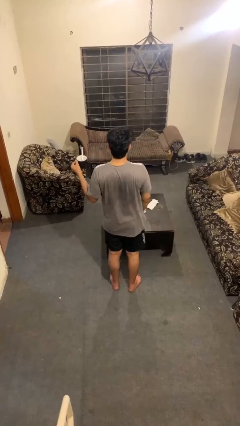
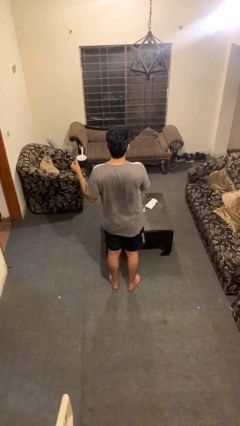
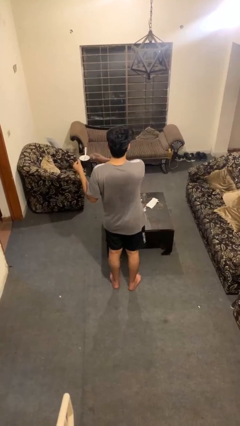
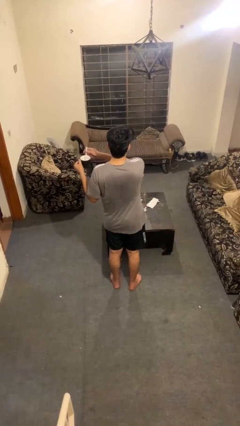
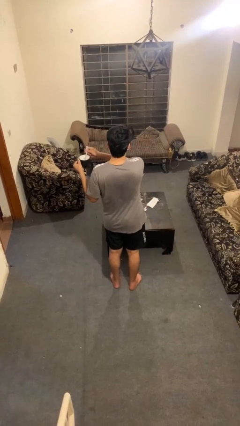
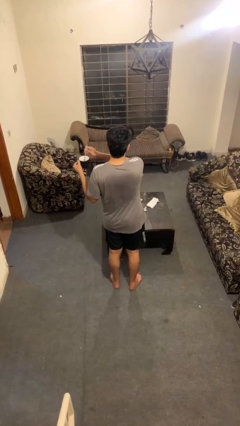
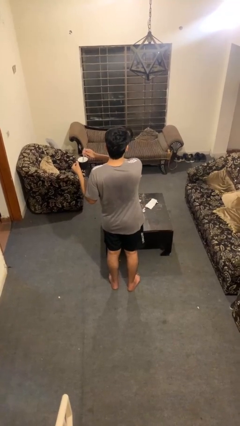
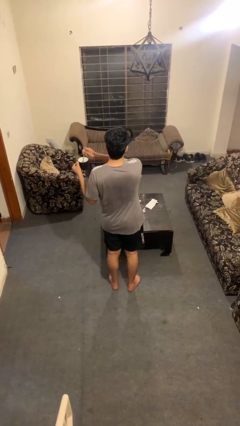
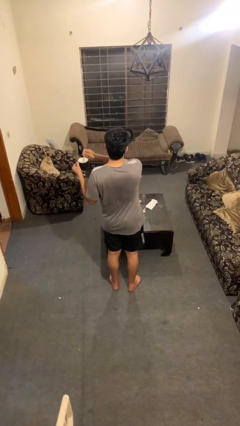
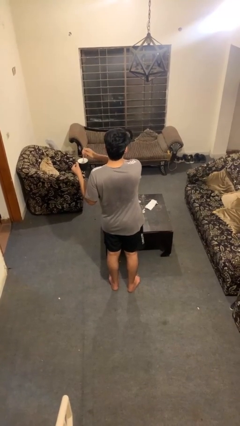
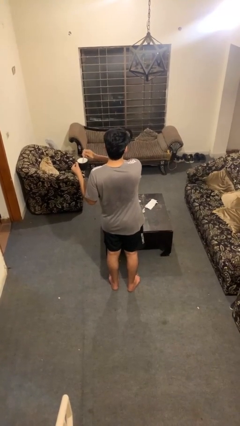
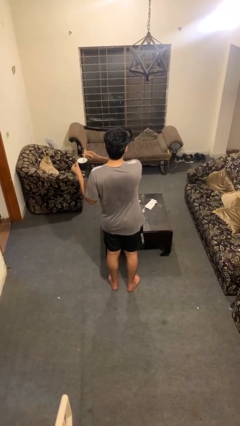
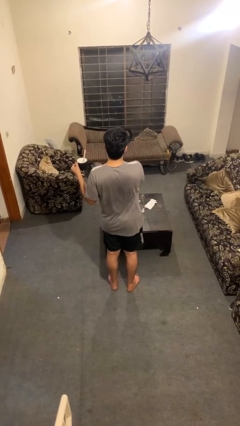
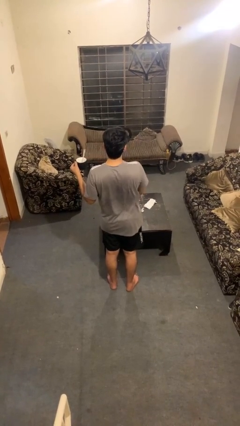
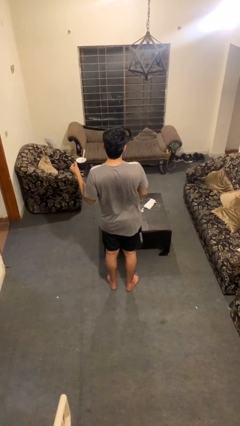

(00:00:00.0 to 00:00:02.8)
person stirs mug

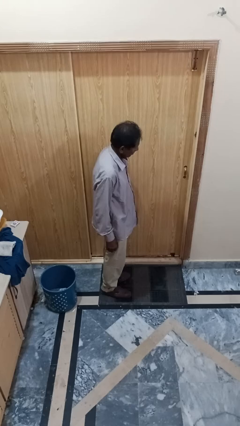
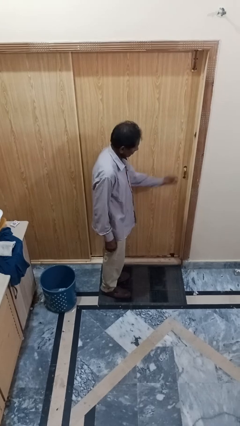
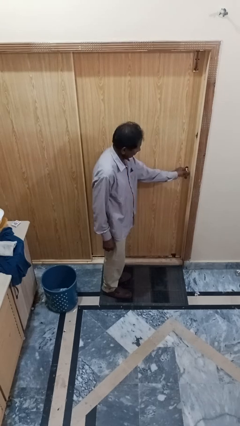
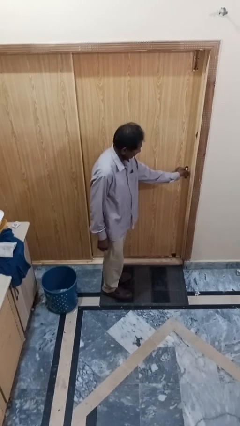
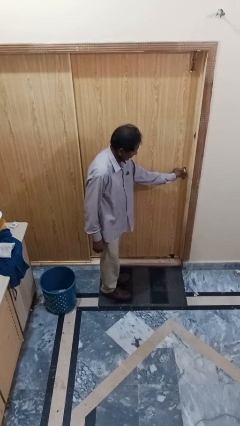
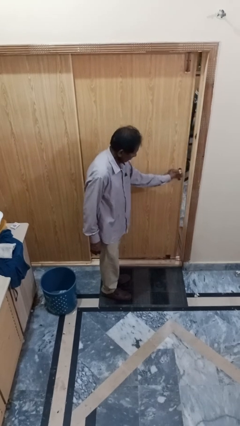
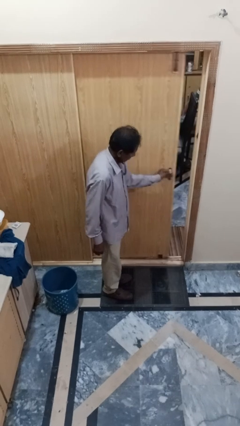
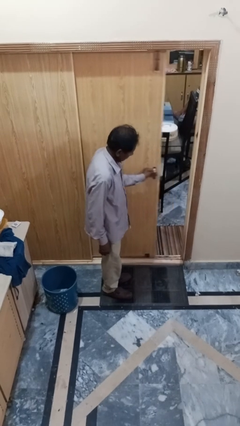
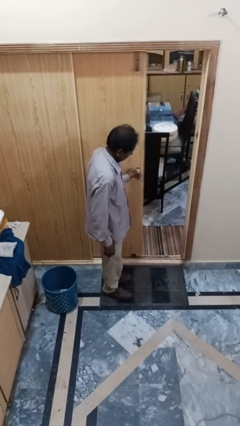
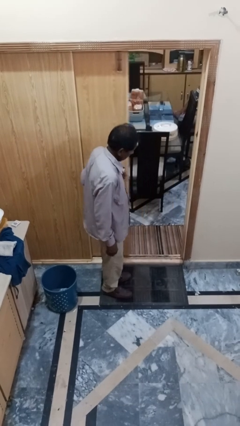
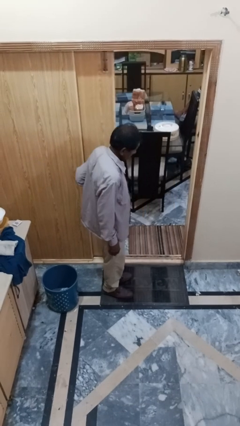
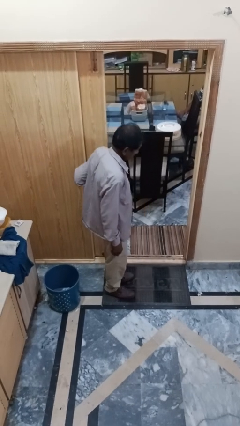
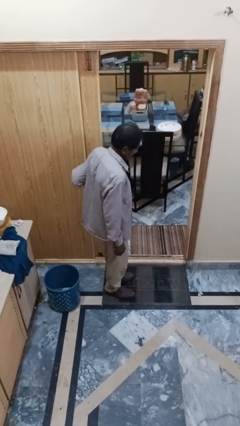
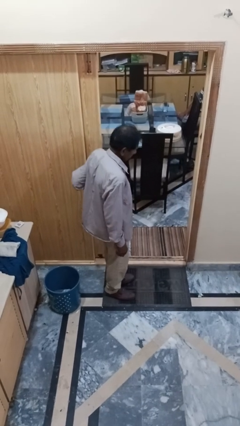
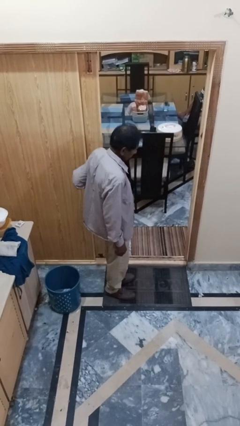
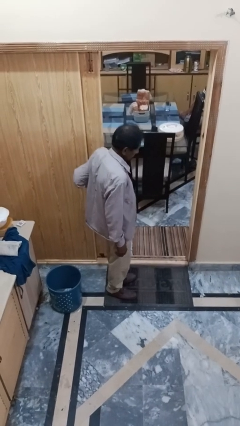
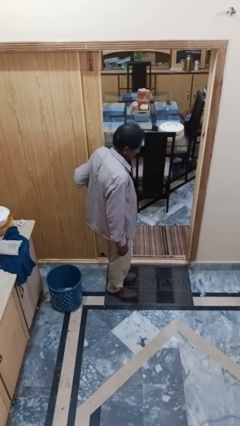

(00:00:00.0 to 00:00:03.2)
person opens sliding door

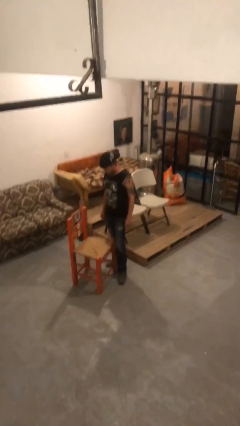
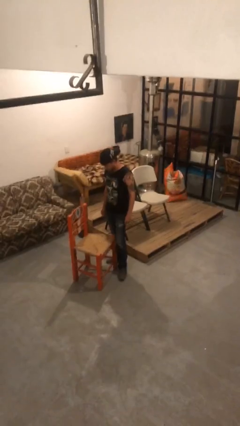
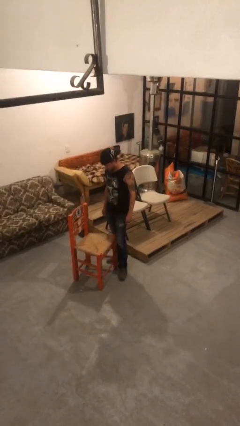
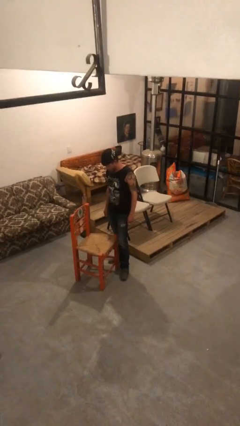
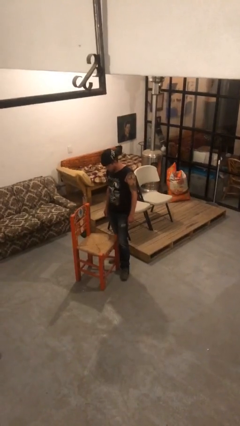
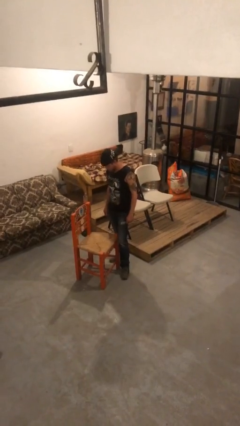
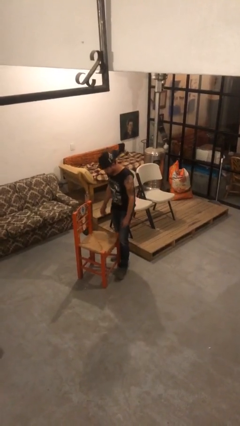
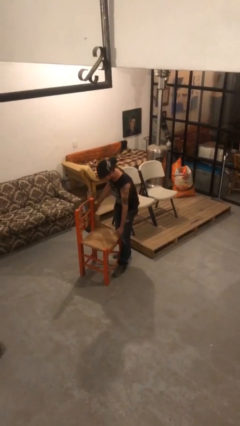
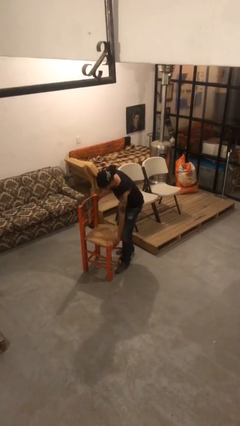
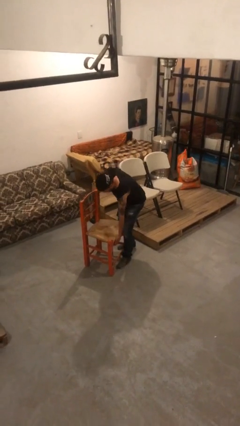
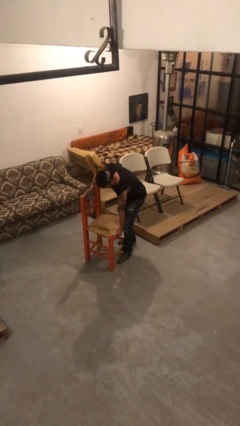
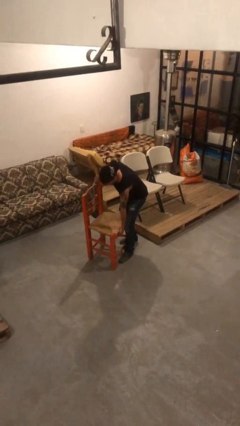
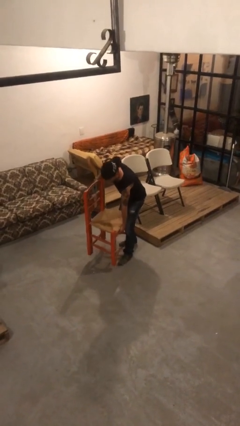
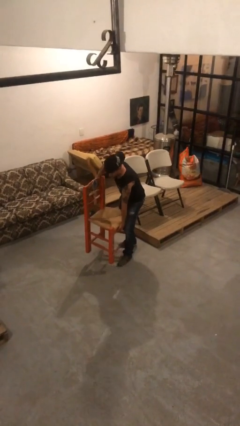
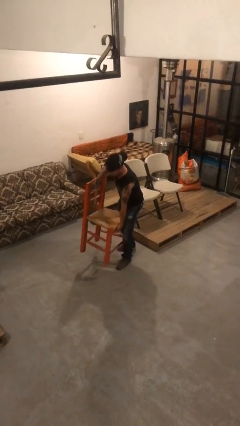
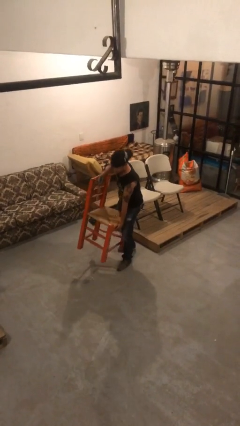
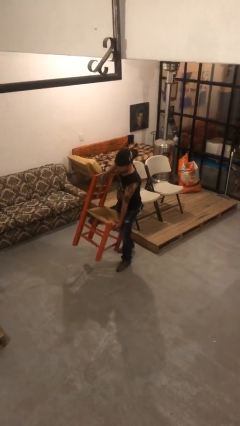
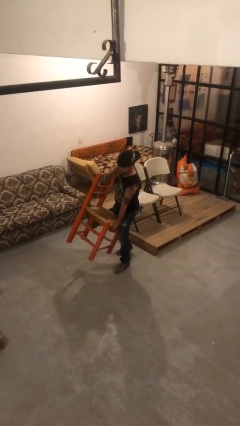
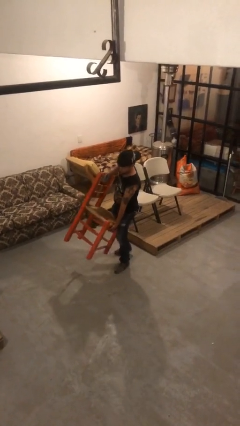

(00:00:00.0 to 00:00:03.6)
person picks up object from floor

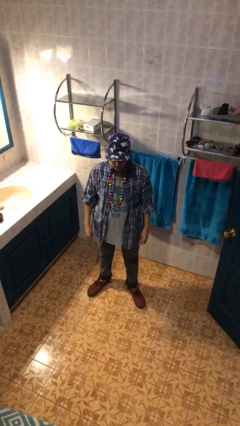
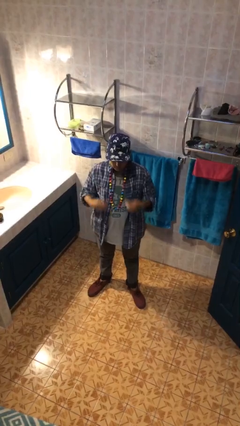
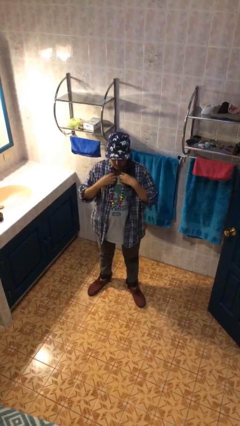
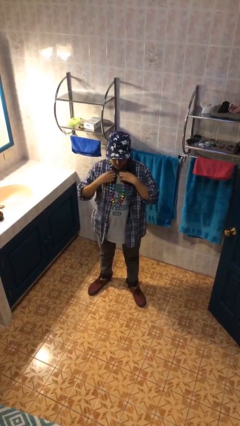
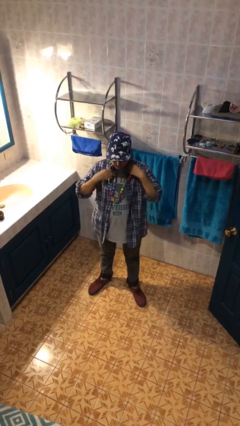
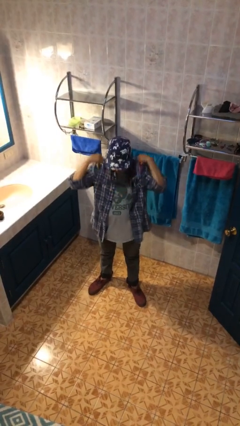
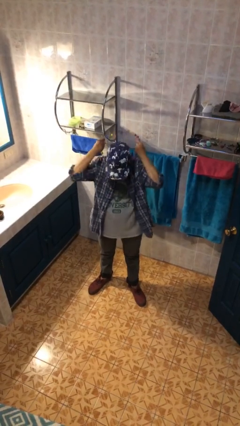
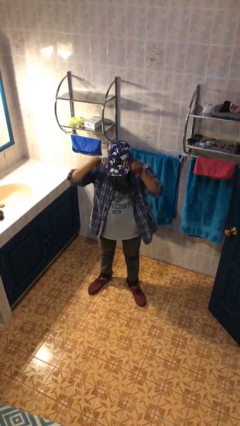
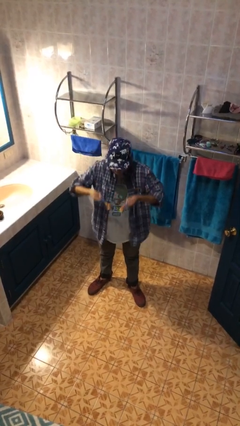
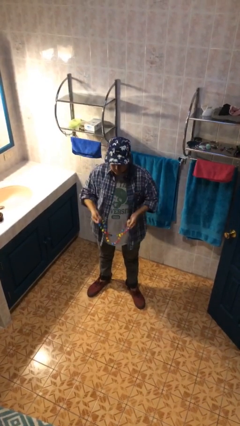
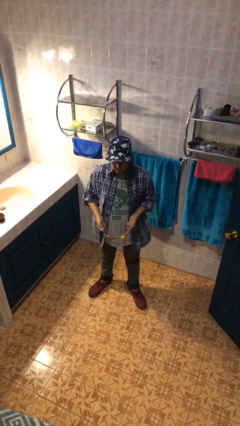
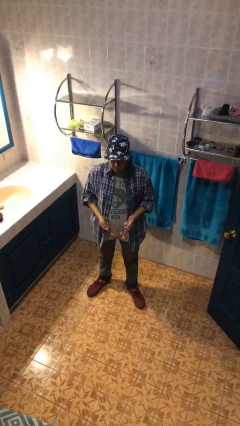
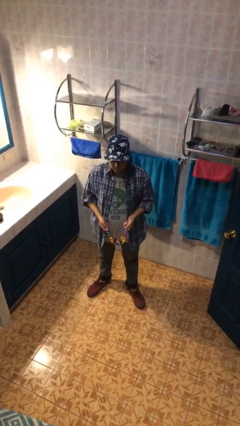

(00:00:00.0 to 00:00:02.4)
person takes off necklace

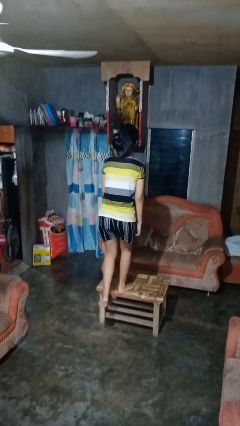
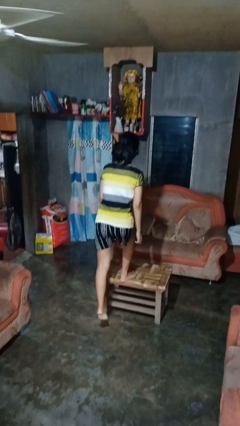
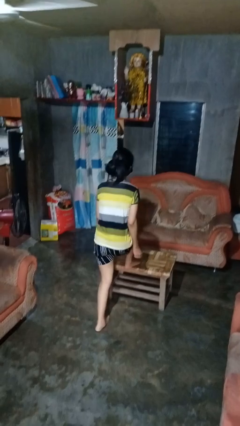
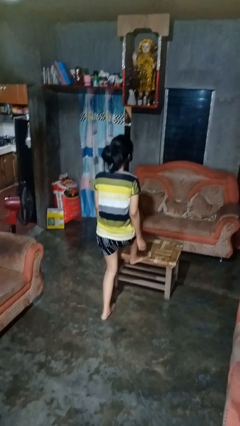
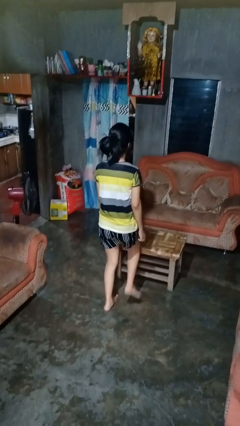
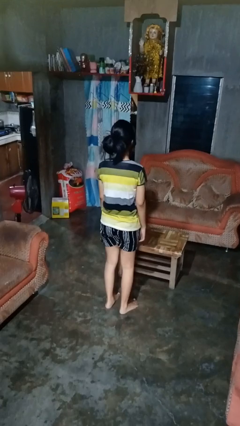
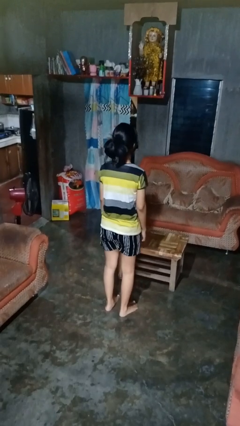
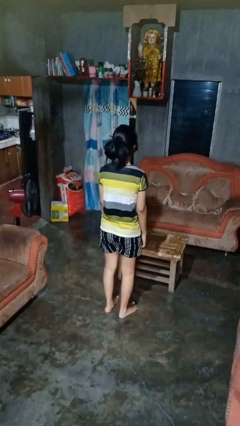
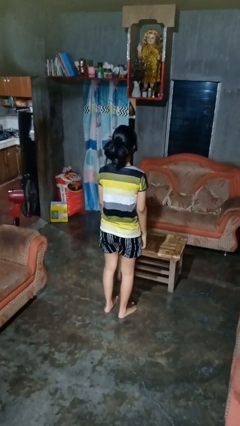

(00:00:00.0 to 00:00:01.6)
person climbs off table

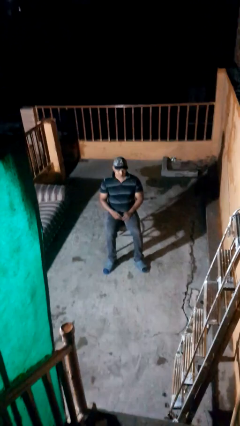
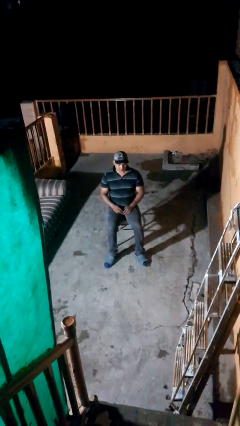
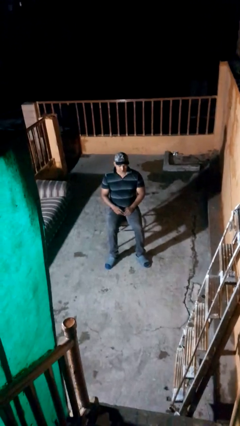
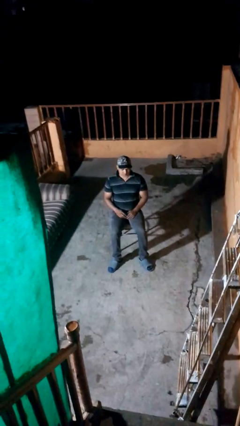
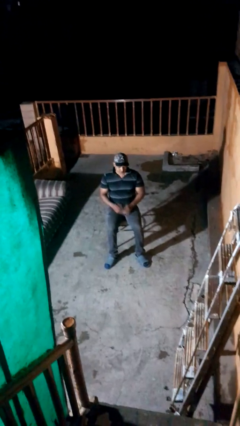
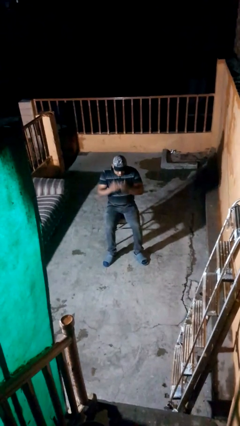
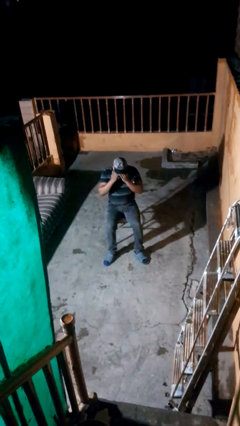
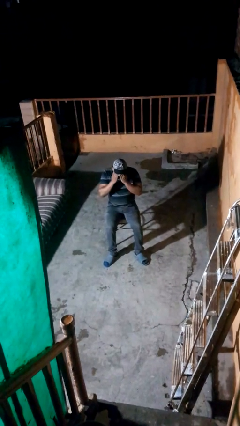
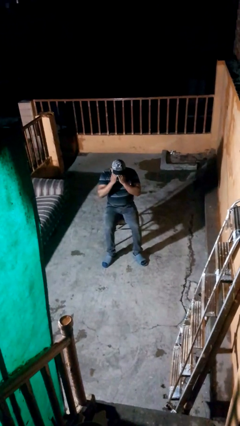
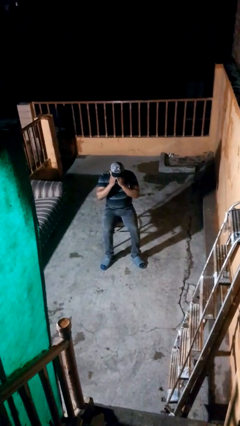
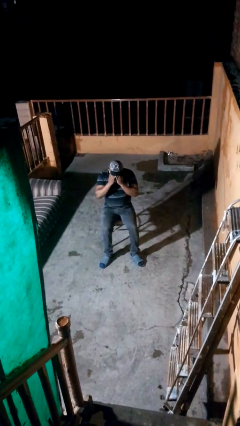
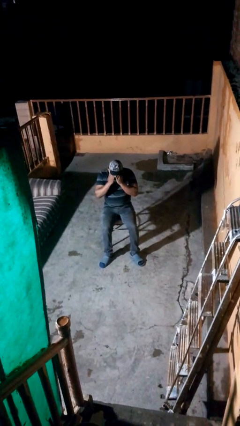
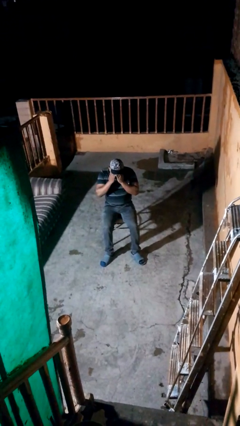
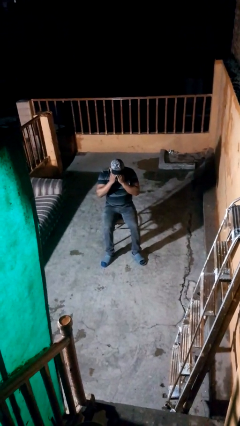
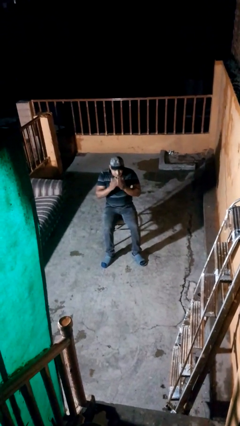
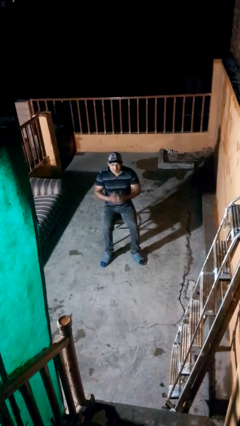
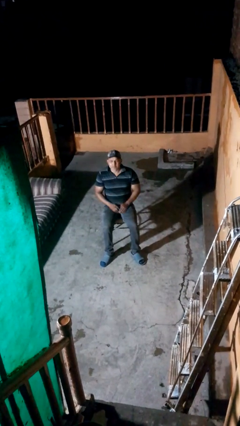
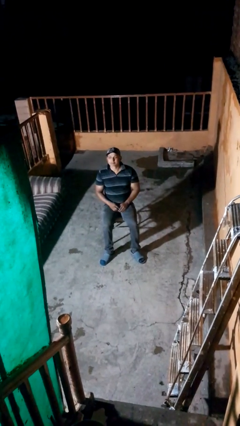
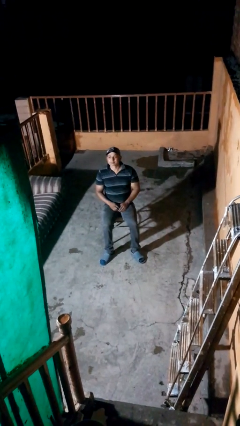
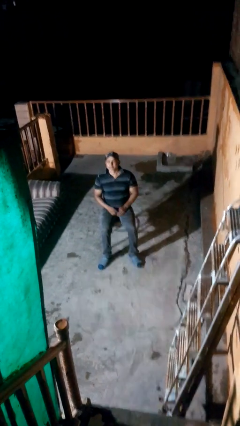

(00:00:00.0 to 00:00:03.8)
person covers face with hands
